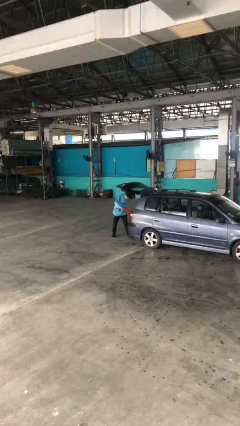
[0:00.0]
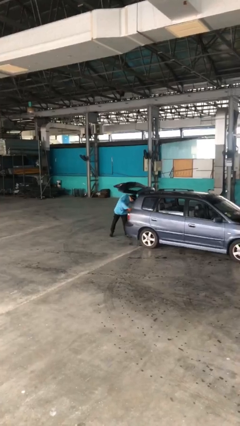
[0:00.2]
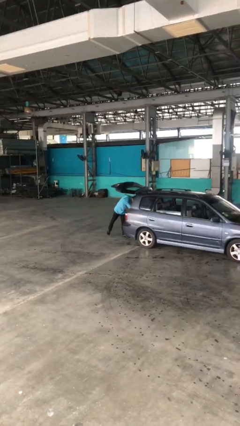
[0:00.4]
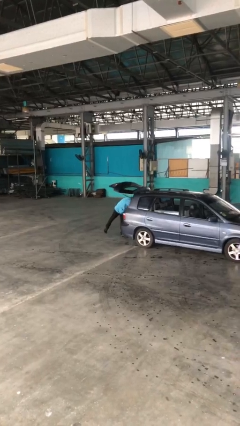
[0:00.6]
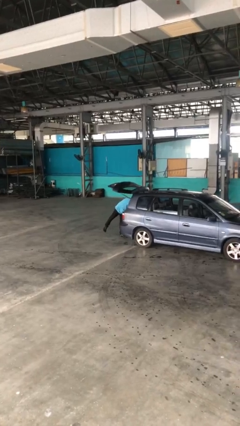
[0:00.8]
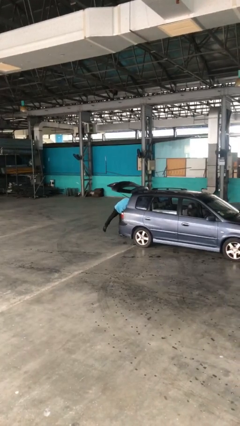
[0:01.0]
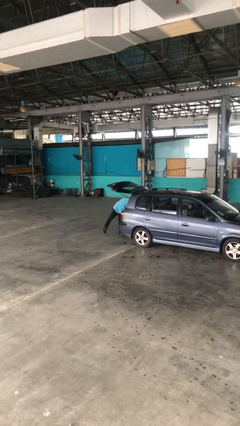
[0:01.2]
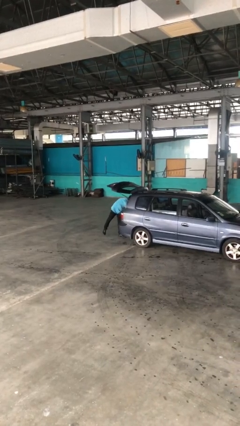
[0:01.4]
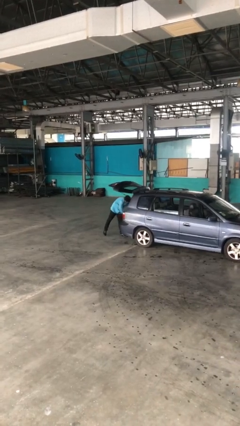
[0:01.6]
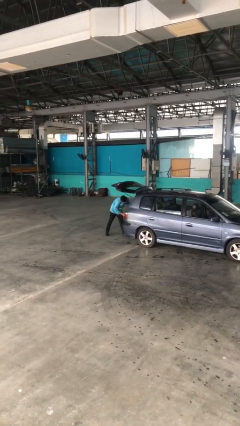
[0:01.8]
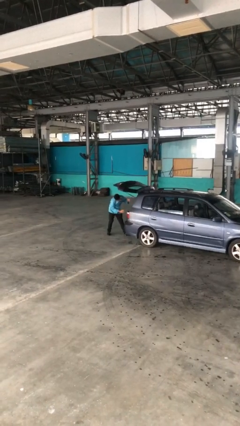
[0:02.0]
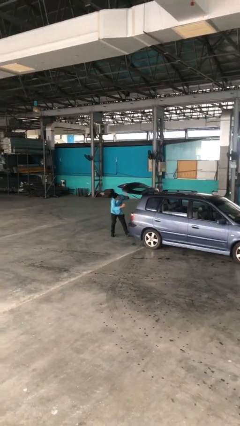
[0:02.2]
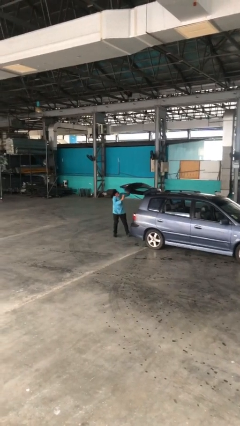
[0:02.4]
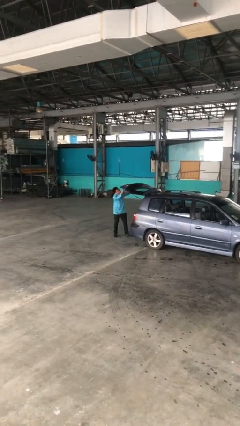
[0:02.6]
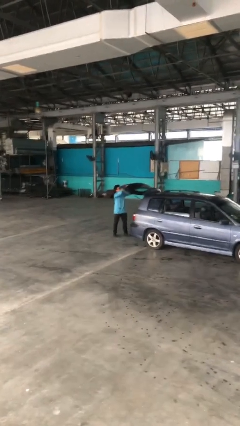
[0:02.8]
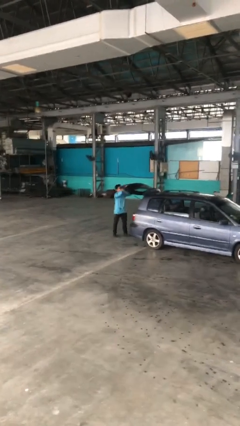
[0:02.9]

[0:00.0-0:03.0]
person loads car

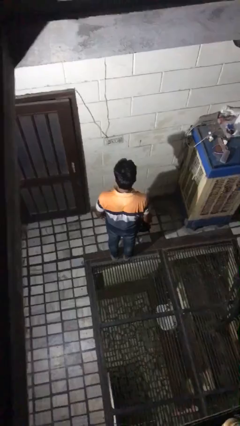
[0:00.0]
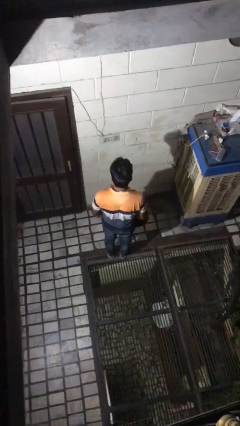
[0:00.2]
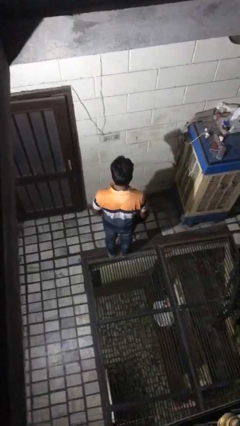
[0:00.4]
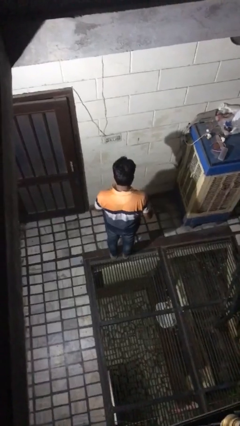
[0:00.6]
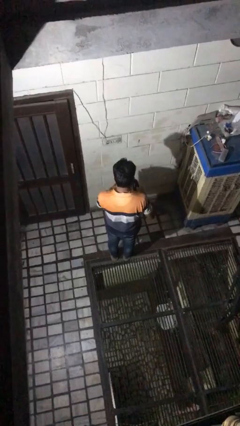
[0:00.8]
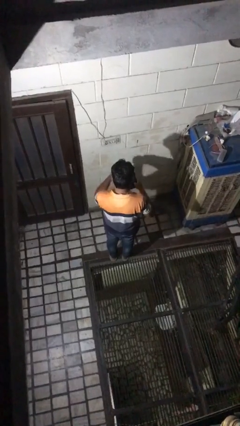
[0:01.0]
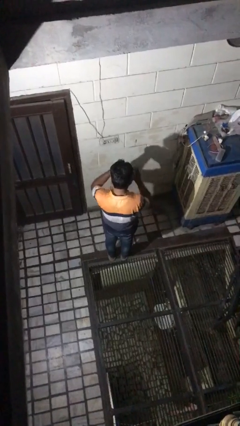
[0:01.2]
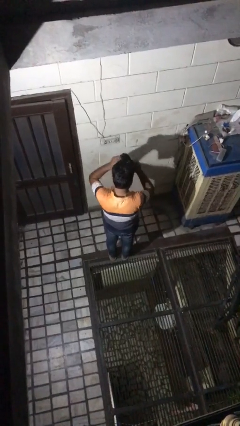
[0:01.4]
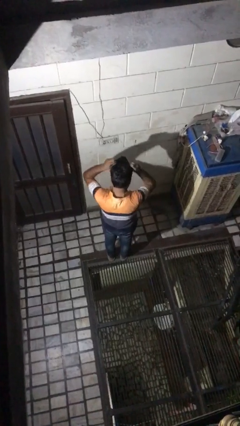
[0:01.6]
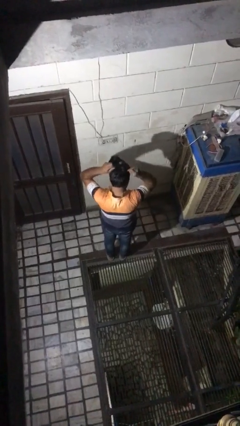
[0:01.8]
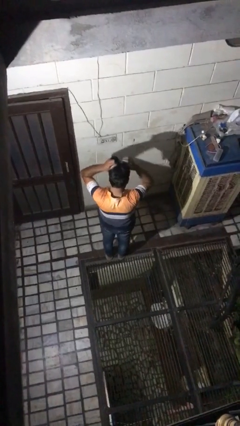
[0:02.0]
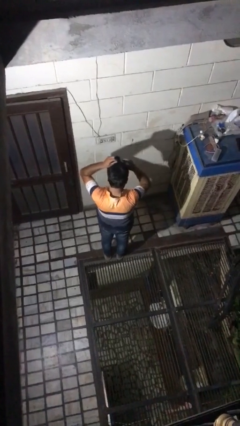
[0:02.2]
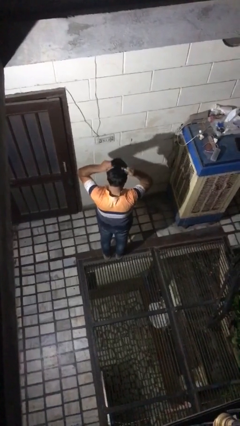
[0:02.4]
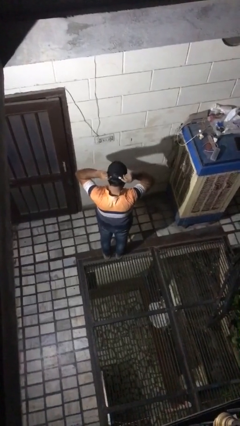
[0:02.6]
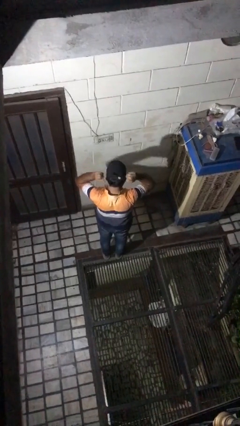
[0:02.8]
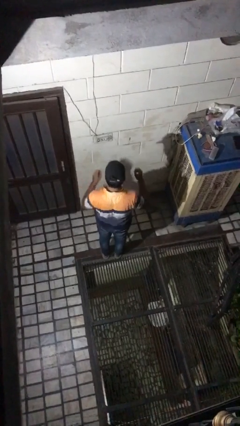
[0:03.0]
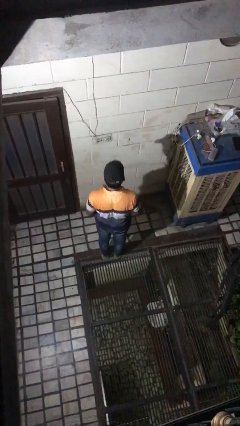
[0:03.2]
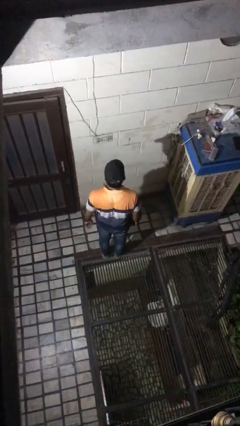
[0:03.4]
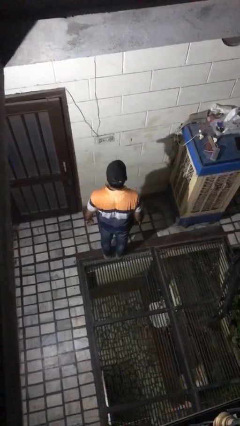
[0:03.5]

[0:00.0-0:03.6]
person puts on hat

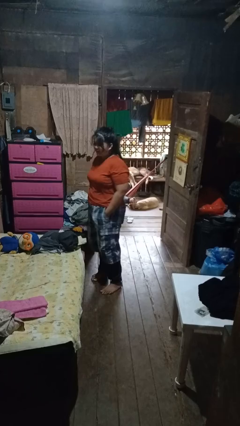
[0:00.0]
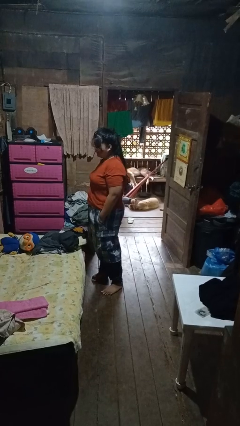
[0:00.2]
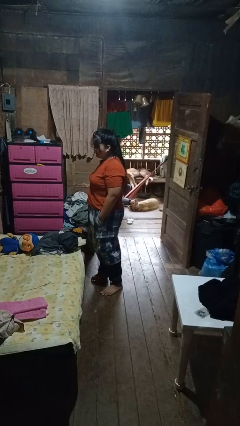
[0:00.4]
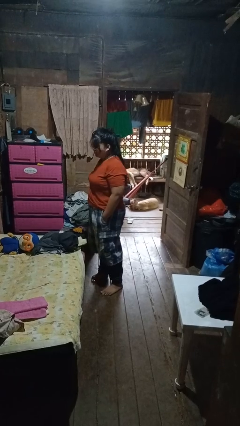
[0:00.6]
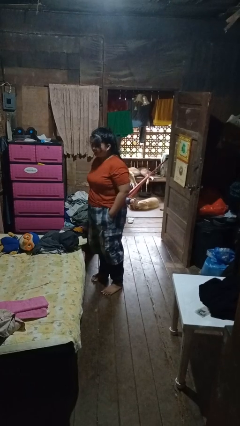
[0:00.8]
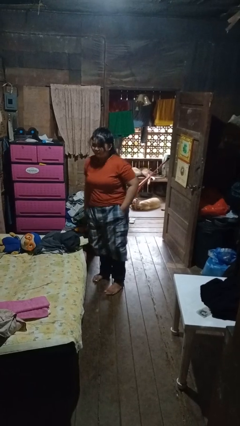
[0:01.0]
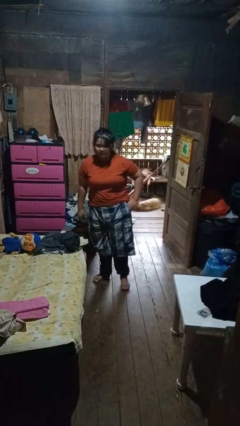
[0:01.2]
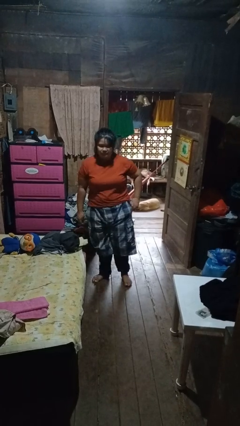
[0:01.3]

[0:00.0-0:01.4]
person puts hands in back pockets

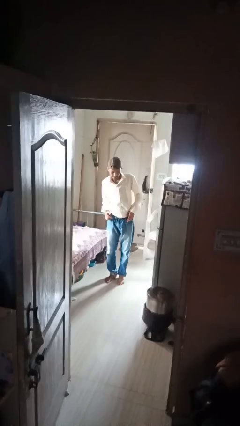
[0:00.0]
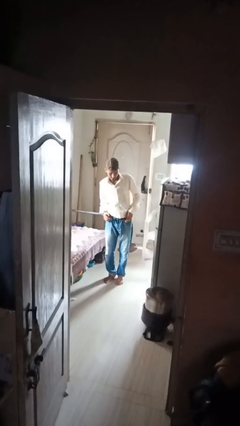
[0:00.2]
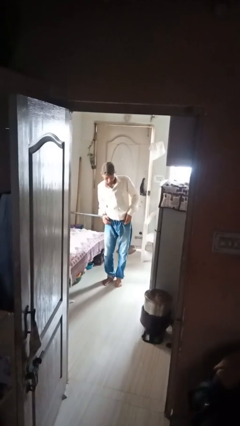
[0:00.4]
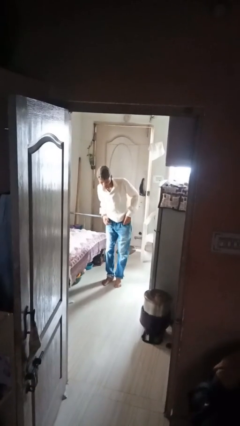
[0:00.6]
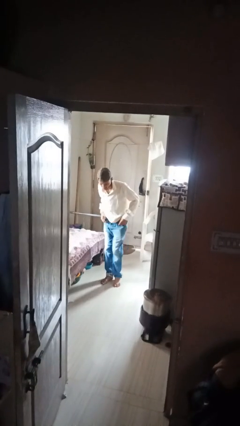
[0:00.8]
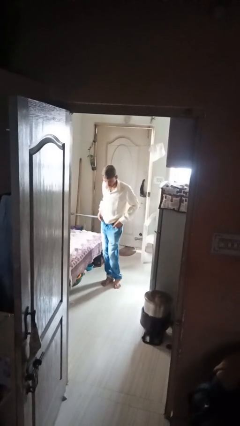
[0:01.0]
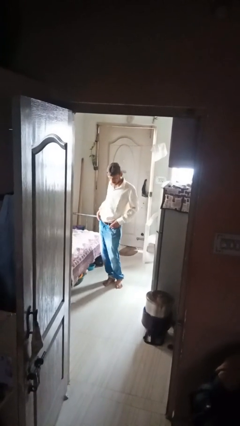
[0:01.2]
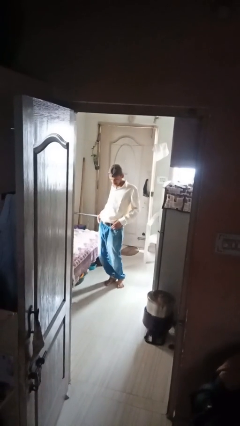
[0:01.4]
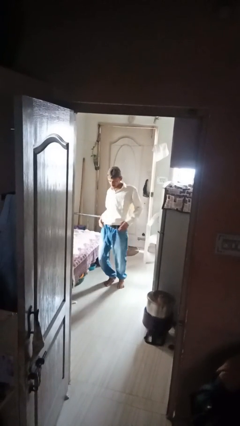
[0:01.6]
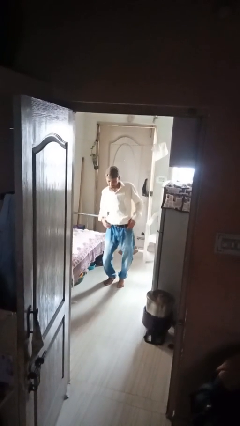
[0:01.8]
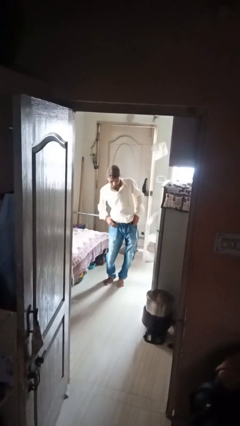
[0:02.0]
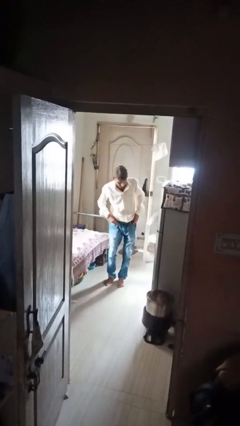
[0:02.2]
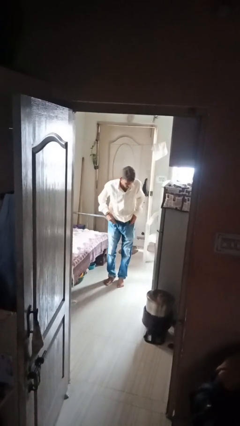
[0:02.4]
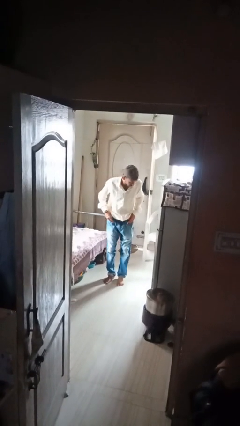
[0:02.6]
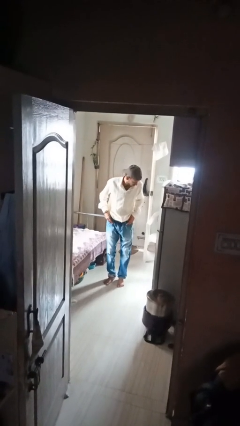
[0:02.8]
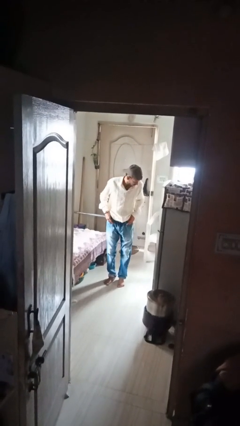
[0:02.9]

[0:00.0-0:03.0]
person wiggles hips

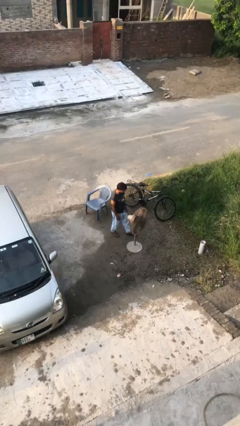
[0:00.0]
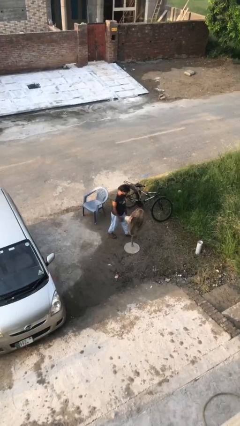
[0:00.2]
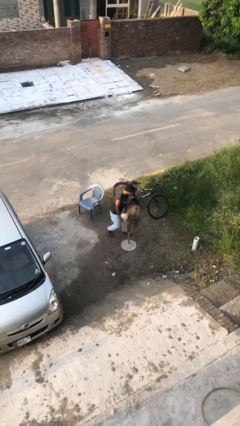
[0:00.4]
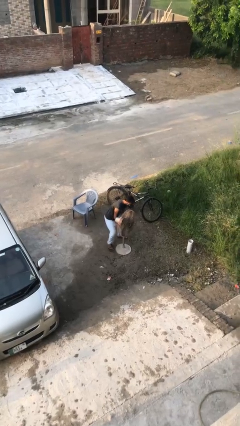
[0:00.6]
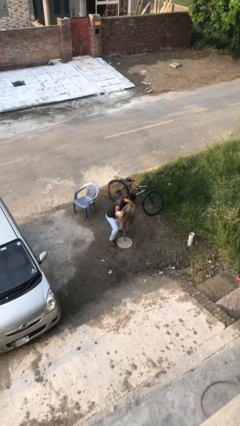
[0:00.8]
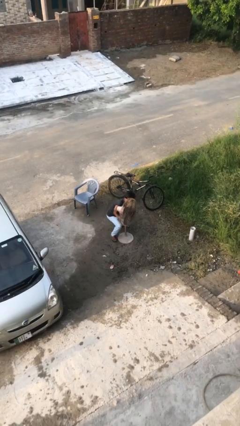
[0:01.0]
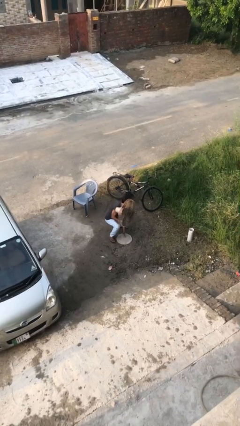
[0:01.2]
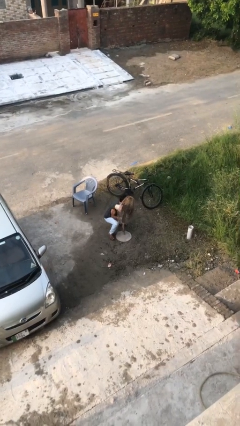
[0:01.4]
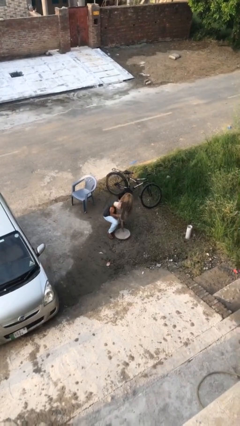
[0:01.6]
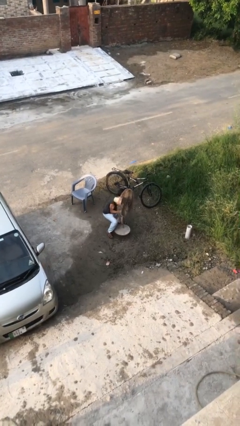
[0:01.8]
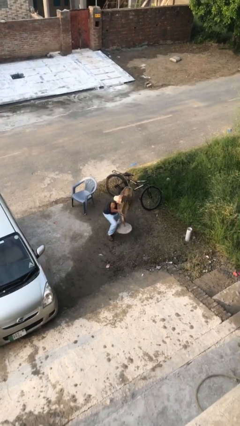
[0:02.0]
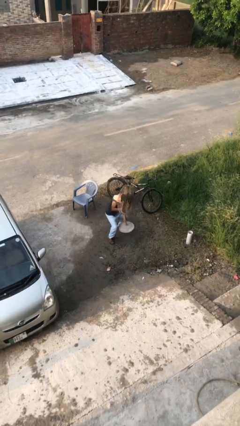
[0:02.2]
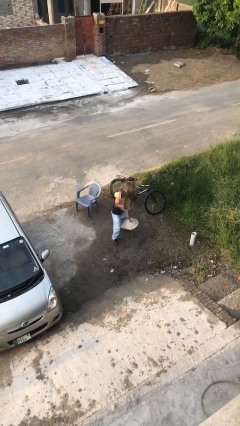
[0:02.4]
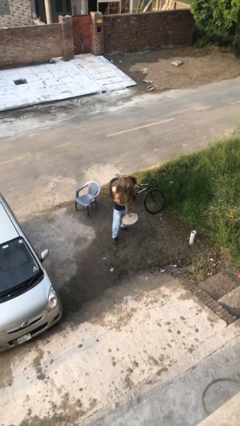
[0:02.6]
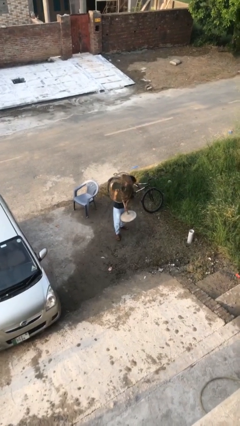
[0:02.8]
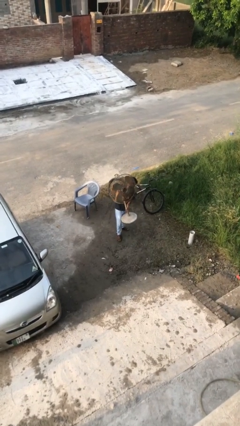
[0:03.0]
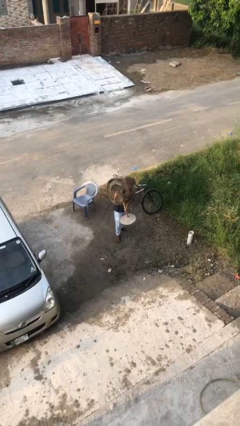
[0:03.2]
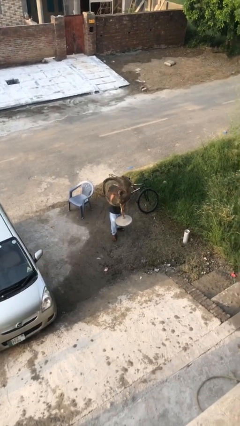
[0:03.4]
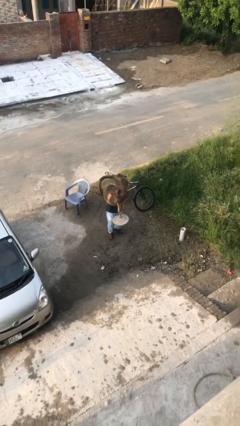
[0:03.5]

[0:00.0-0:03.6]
person picks up object from floor

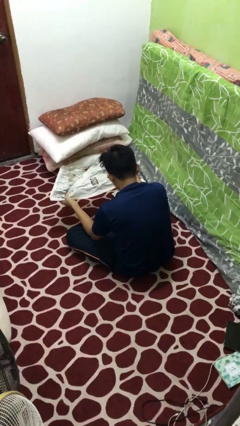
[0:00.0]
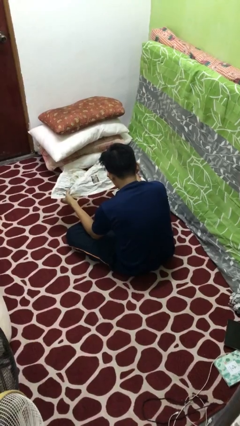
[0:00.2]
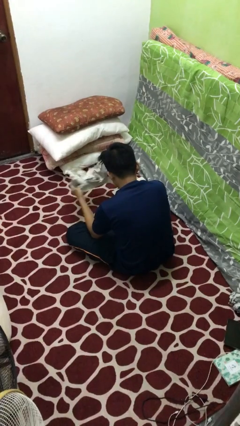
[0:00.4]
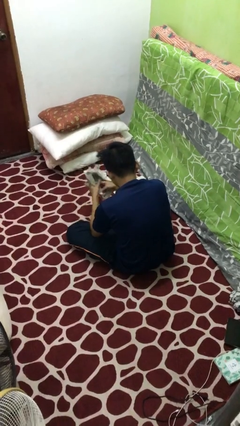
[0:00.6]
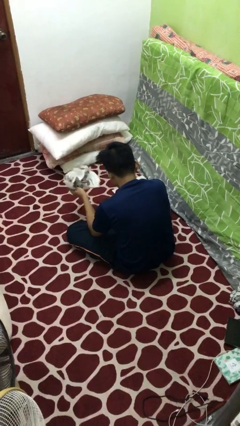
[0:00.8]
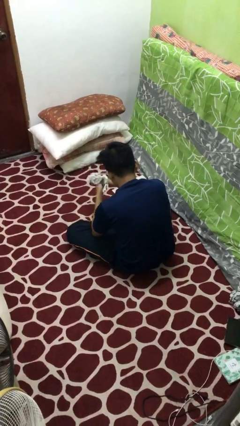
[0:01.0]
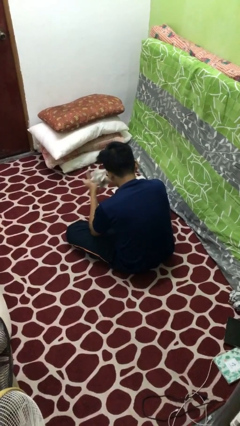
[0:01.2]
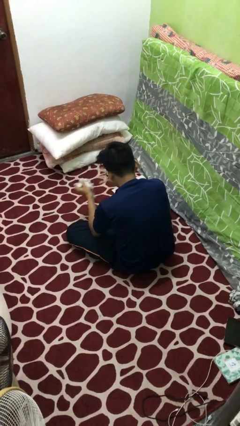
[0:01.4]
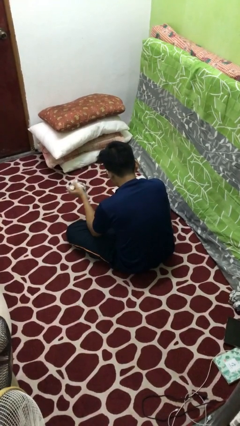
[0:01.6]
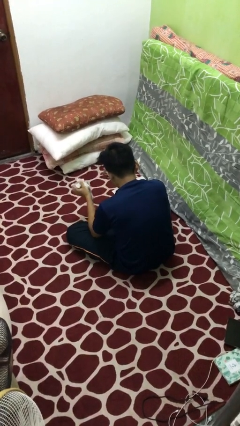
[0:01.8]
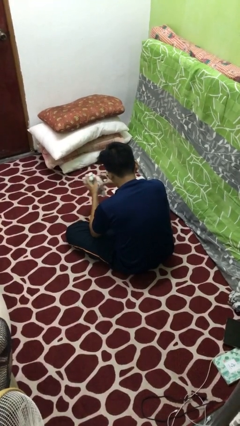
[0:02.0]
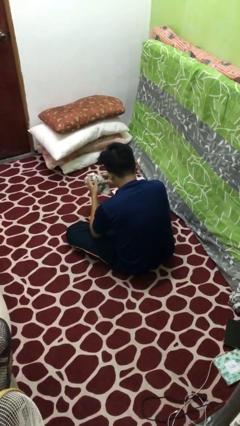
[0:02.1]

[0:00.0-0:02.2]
person crumples paper

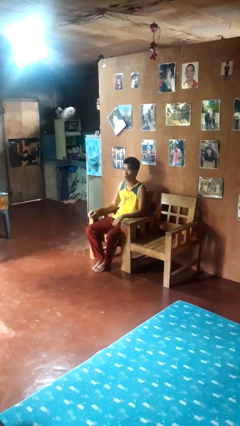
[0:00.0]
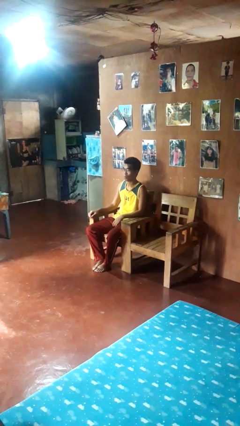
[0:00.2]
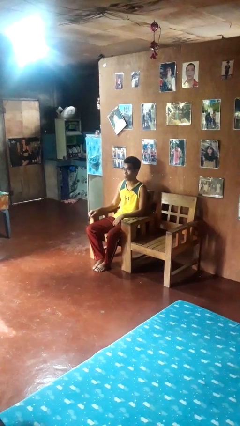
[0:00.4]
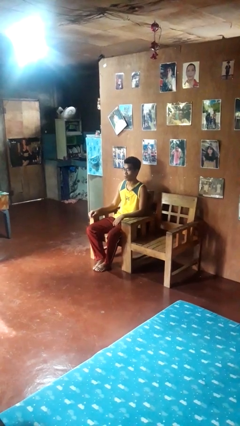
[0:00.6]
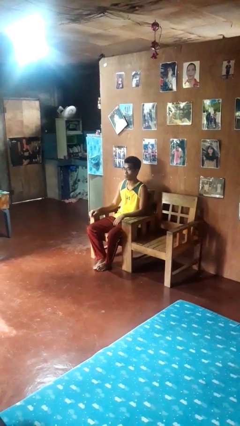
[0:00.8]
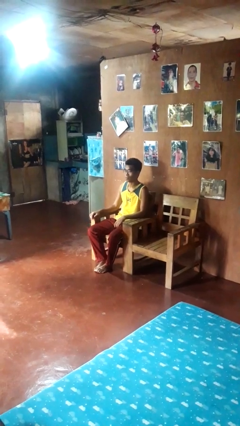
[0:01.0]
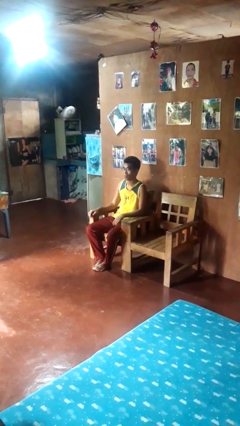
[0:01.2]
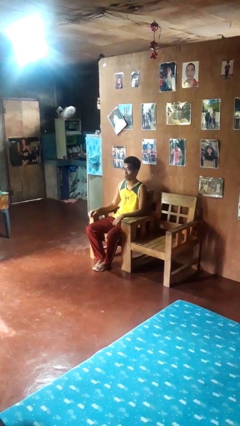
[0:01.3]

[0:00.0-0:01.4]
person shakes head
